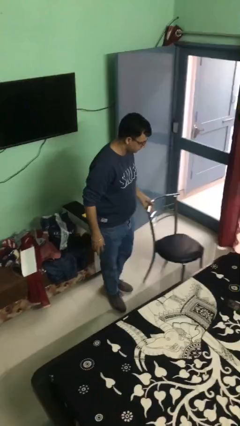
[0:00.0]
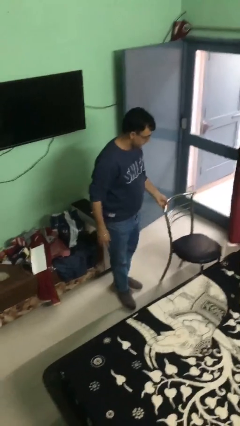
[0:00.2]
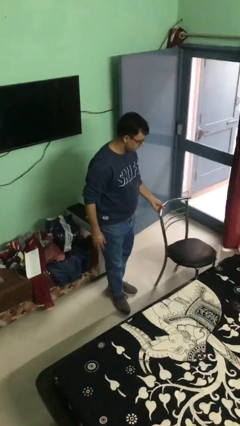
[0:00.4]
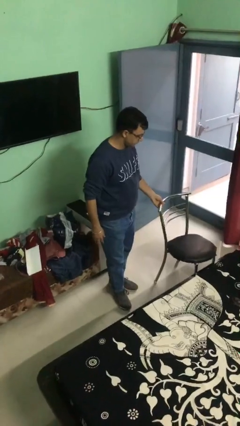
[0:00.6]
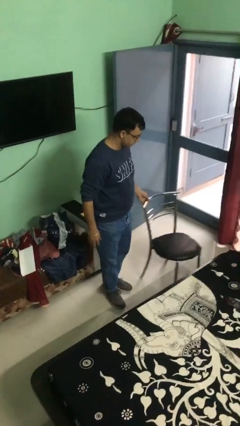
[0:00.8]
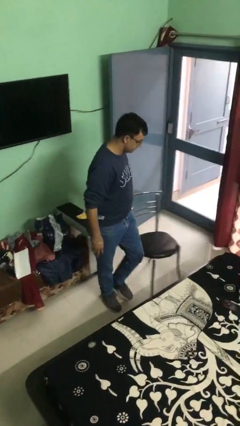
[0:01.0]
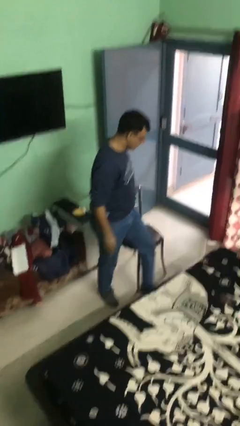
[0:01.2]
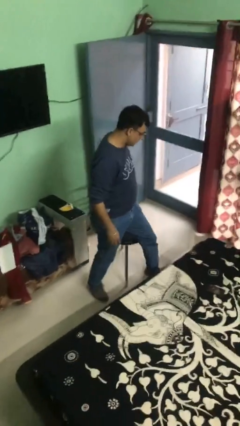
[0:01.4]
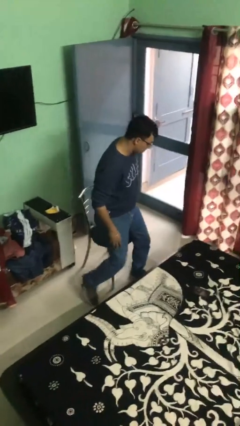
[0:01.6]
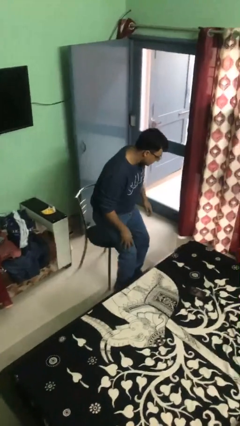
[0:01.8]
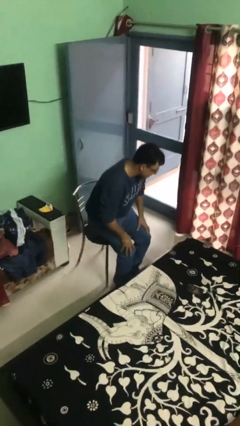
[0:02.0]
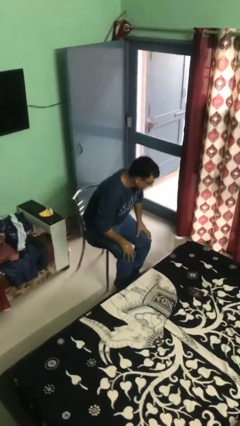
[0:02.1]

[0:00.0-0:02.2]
person sits down

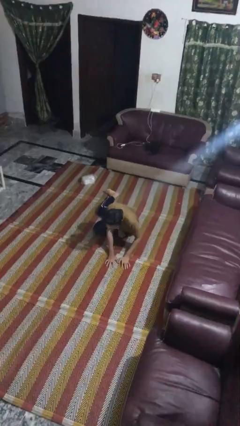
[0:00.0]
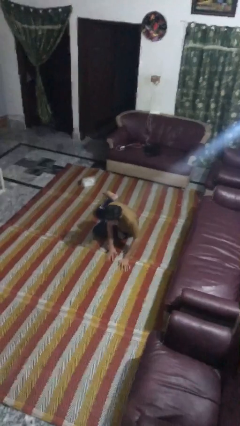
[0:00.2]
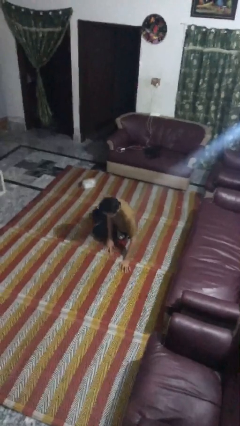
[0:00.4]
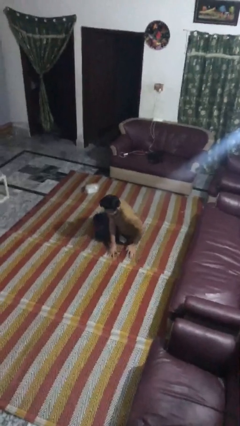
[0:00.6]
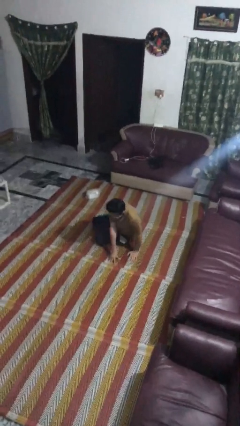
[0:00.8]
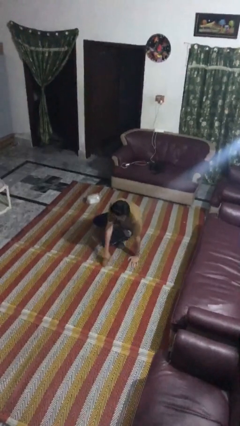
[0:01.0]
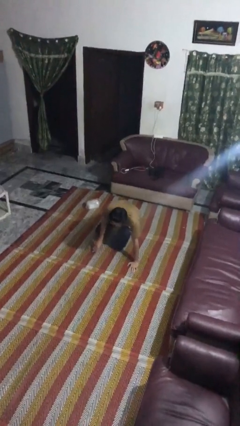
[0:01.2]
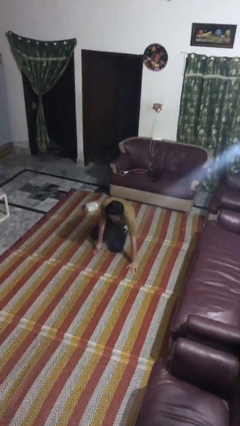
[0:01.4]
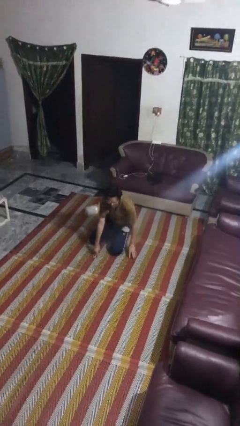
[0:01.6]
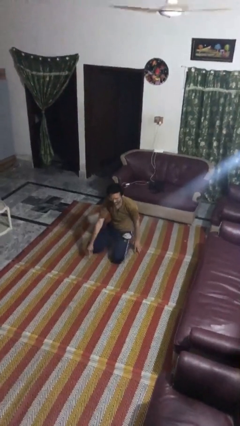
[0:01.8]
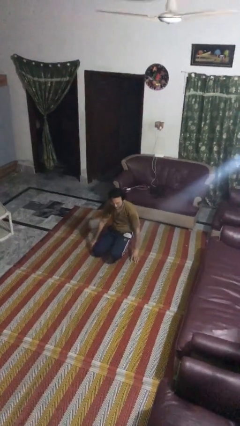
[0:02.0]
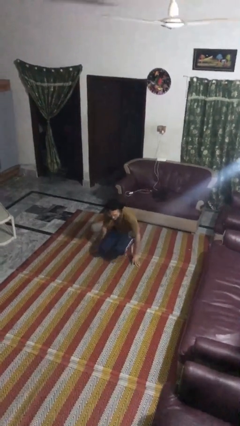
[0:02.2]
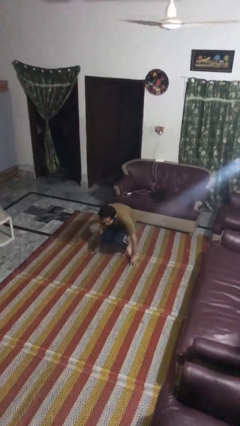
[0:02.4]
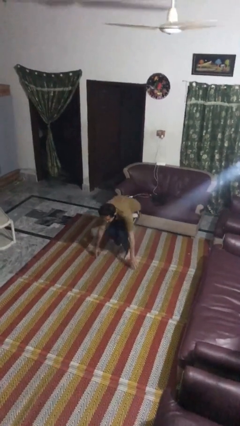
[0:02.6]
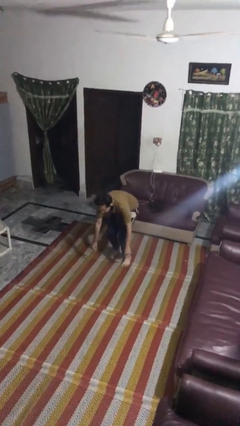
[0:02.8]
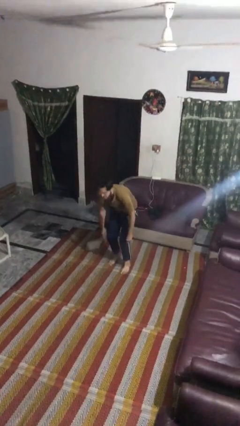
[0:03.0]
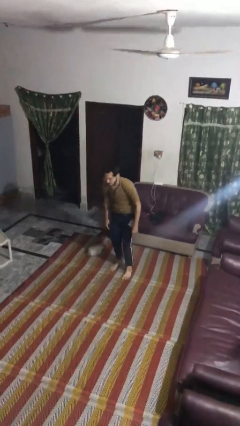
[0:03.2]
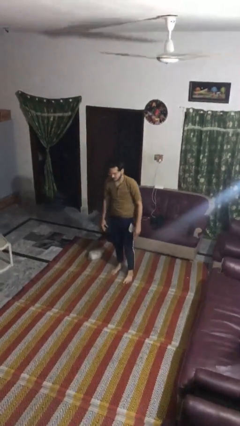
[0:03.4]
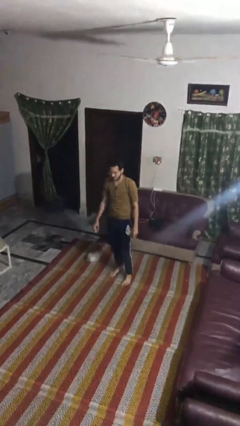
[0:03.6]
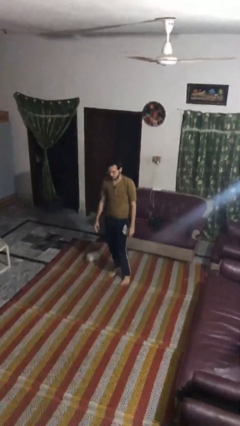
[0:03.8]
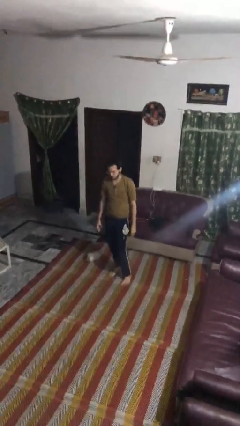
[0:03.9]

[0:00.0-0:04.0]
person stands up from floor

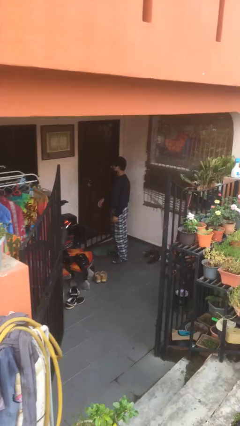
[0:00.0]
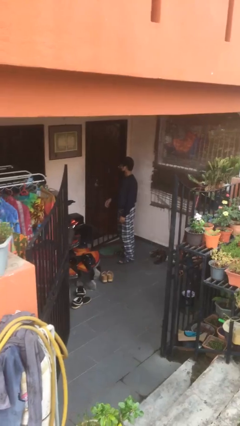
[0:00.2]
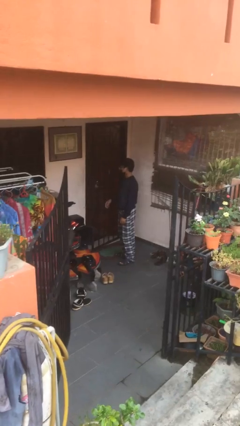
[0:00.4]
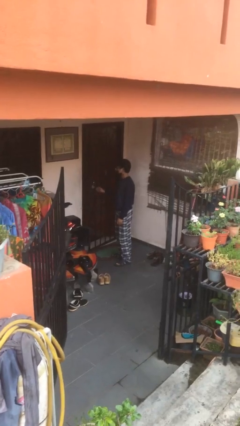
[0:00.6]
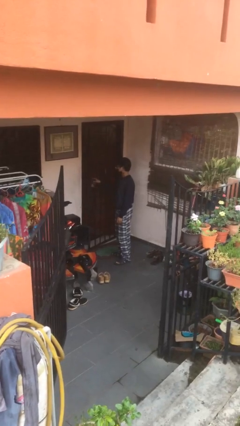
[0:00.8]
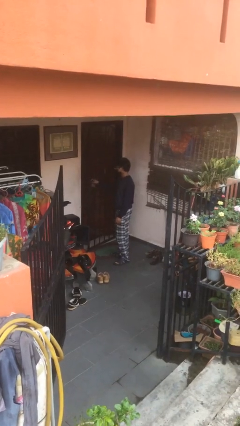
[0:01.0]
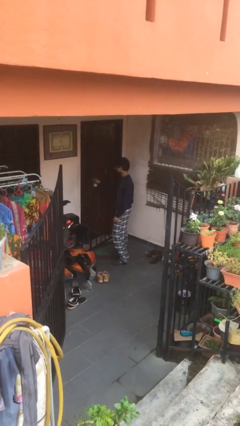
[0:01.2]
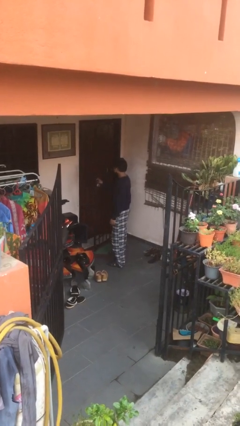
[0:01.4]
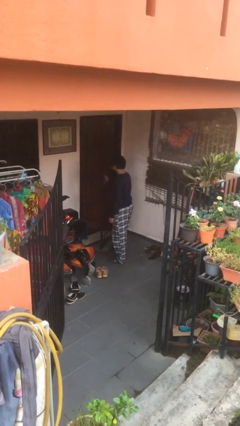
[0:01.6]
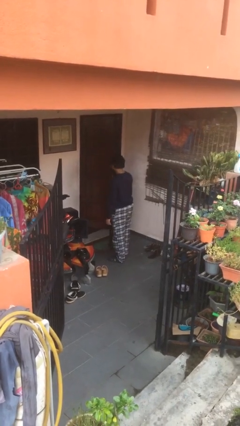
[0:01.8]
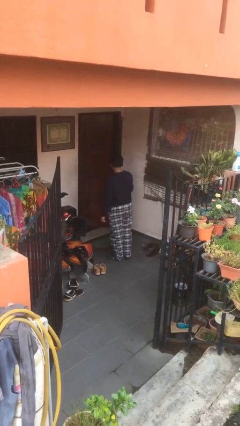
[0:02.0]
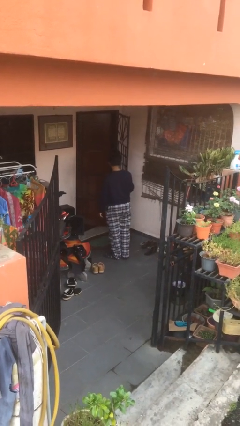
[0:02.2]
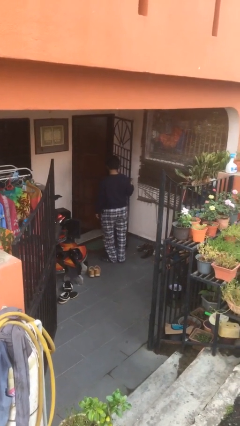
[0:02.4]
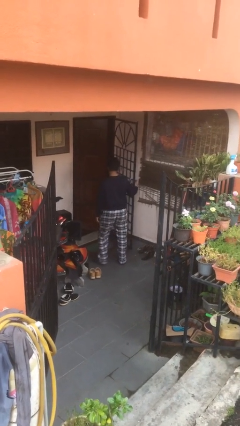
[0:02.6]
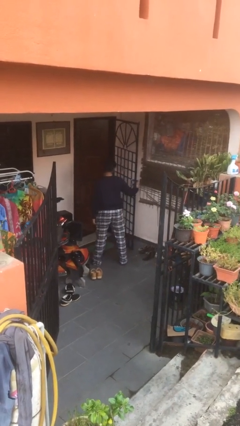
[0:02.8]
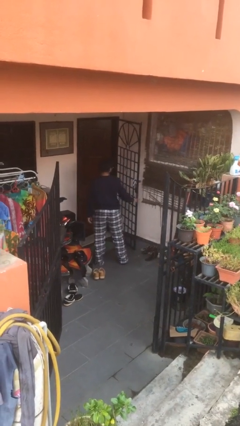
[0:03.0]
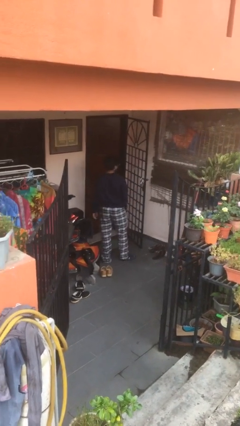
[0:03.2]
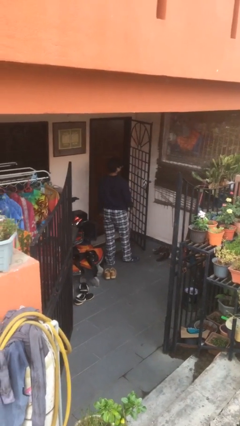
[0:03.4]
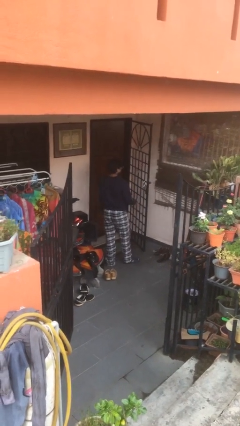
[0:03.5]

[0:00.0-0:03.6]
person opens facility door

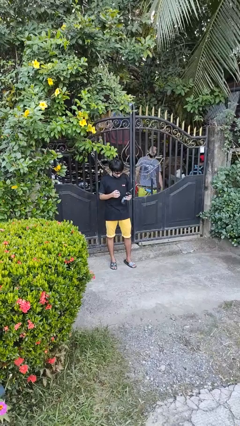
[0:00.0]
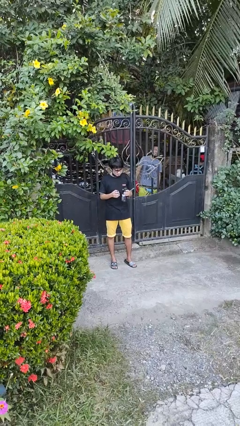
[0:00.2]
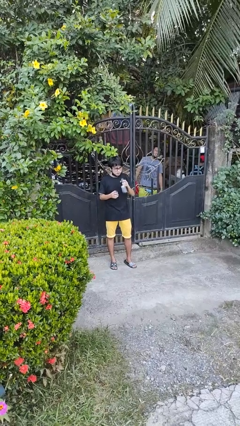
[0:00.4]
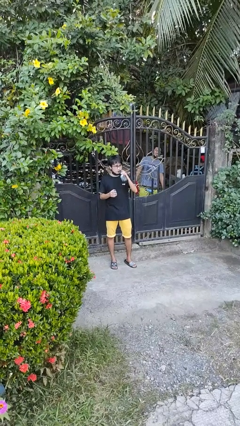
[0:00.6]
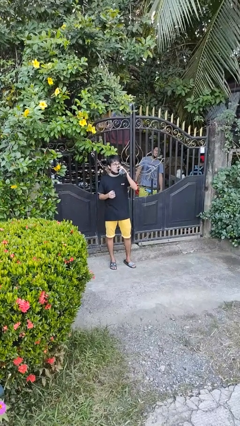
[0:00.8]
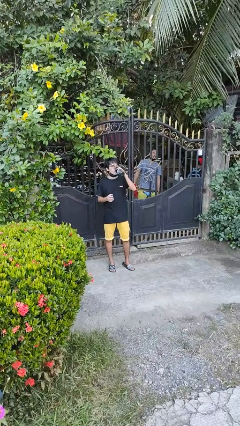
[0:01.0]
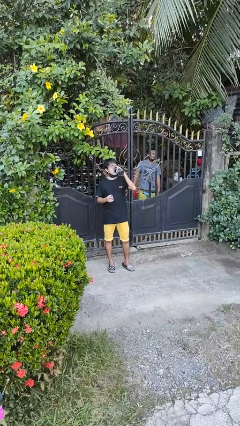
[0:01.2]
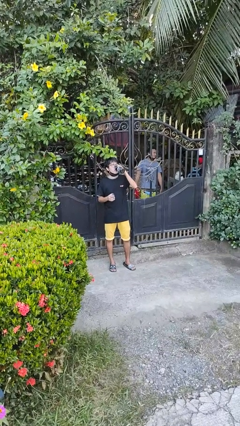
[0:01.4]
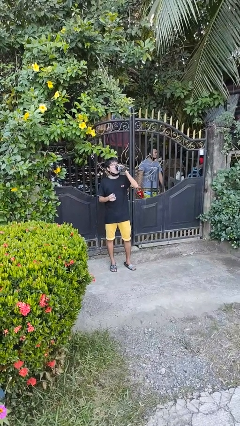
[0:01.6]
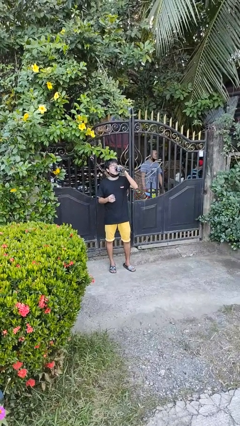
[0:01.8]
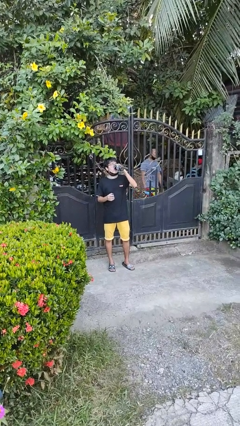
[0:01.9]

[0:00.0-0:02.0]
person drinks from bottle

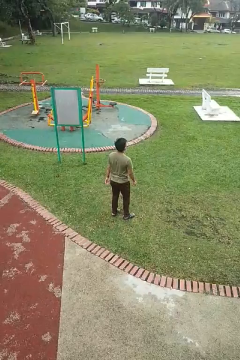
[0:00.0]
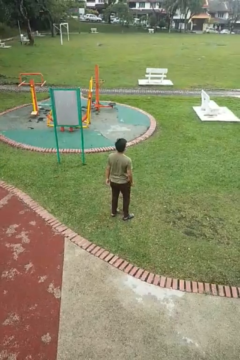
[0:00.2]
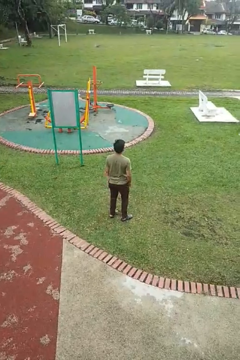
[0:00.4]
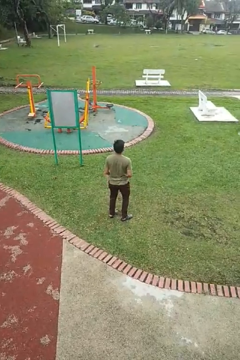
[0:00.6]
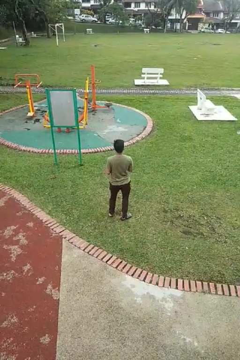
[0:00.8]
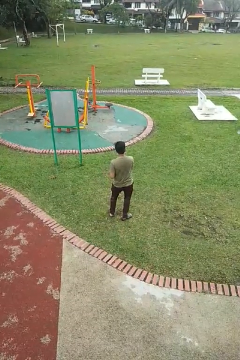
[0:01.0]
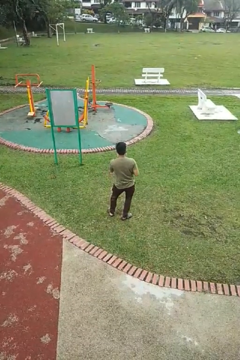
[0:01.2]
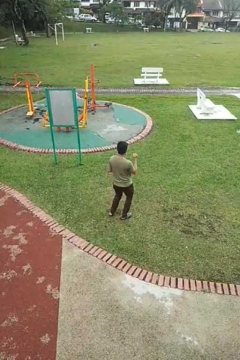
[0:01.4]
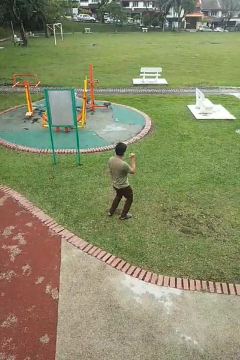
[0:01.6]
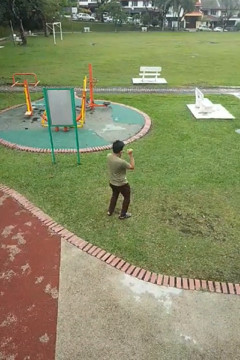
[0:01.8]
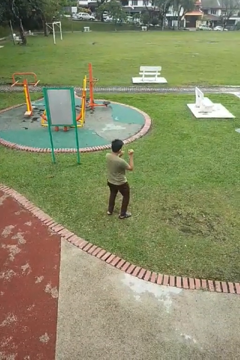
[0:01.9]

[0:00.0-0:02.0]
person dances in place

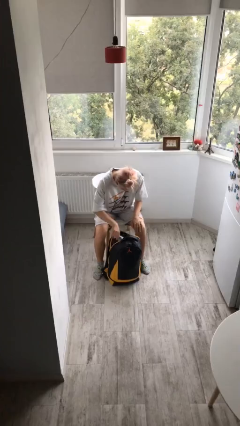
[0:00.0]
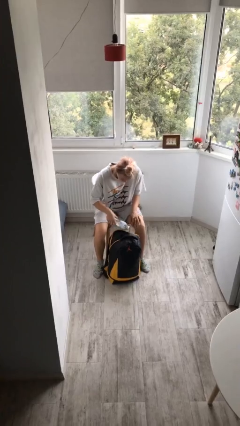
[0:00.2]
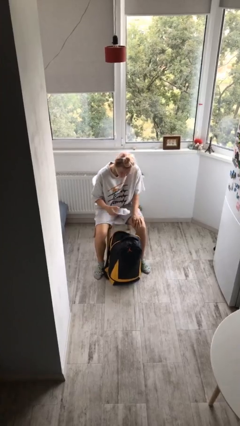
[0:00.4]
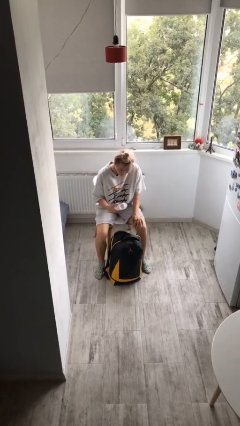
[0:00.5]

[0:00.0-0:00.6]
person takes object from backpack

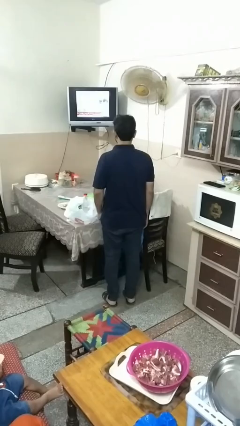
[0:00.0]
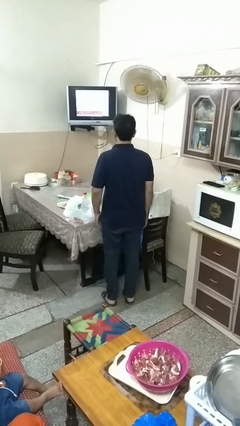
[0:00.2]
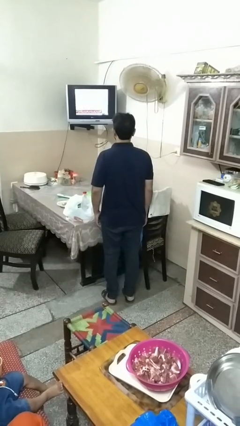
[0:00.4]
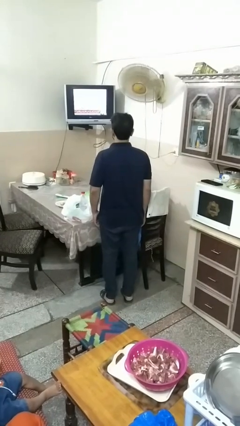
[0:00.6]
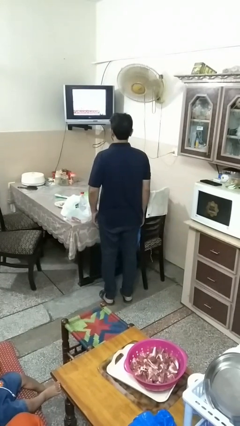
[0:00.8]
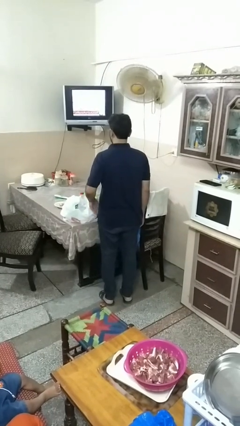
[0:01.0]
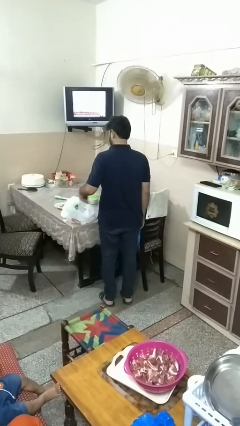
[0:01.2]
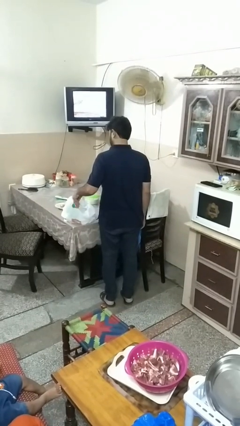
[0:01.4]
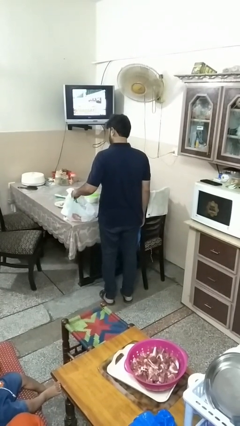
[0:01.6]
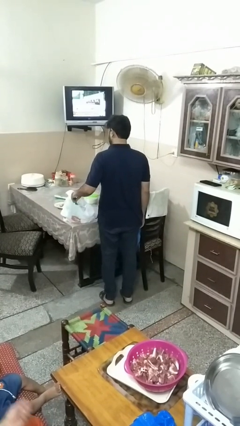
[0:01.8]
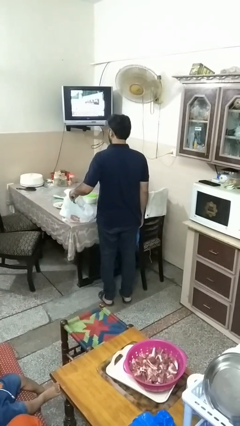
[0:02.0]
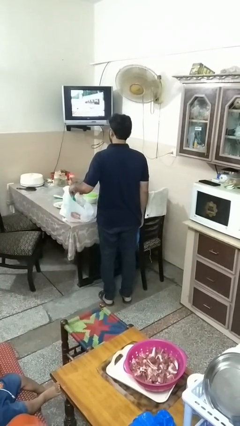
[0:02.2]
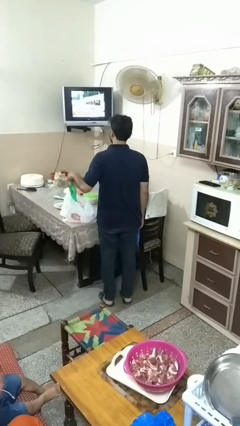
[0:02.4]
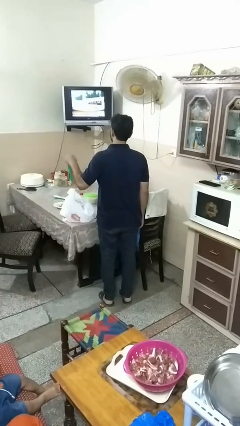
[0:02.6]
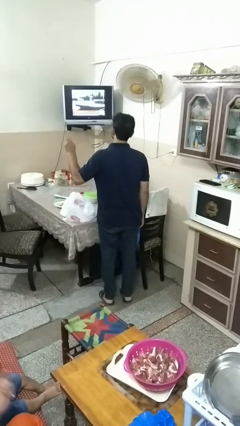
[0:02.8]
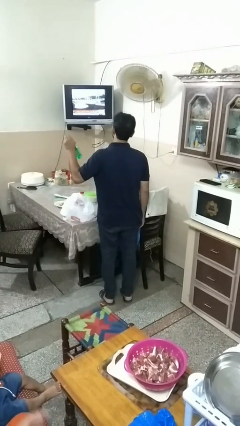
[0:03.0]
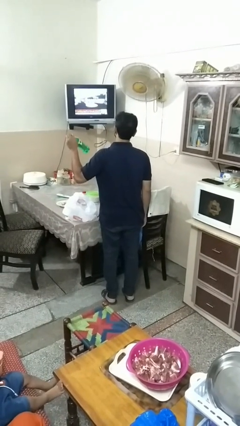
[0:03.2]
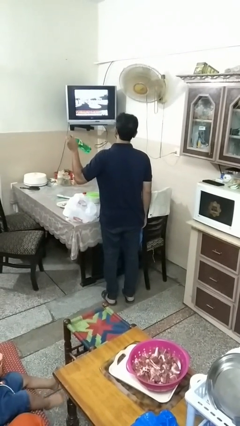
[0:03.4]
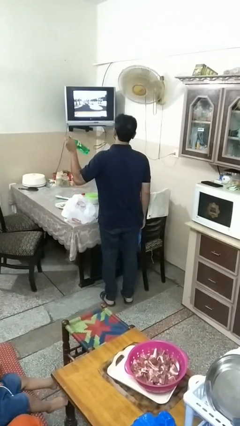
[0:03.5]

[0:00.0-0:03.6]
person takes object from bag
